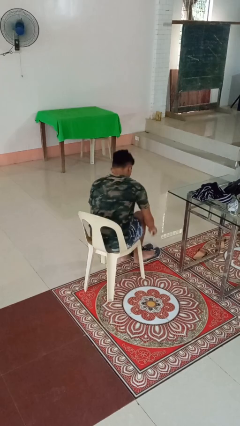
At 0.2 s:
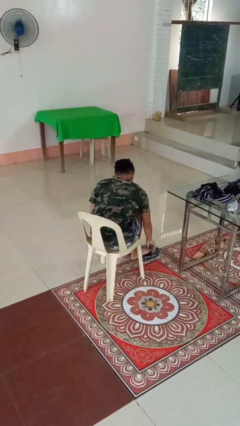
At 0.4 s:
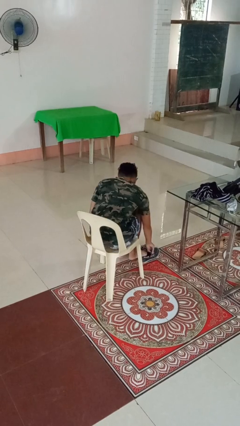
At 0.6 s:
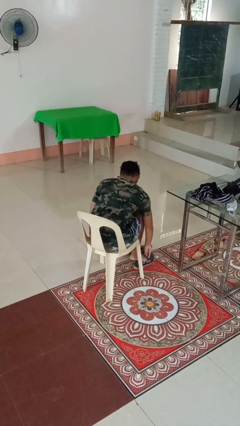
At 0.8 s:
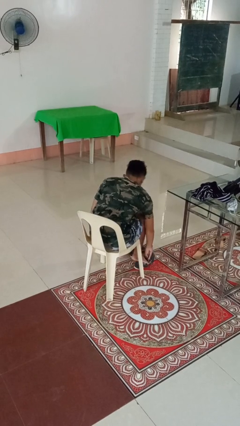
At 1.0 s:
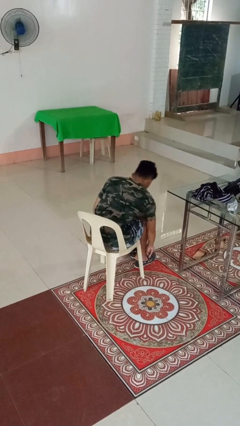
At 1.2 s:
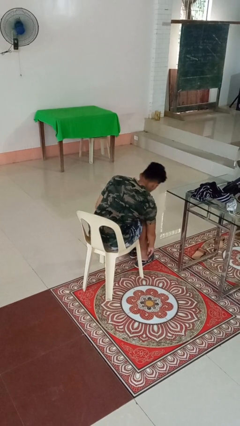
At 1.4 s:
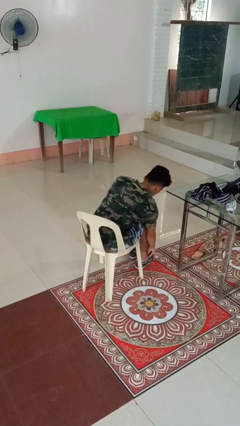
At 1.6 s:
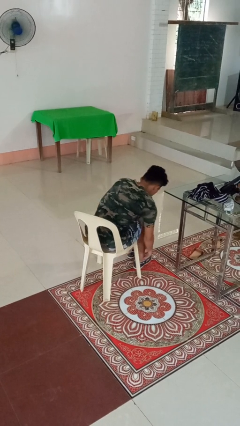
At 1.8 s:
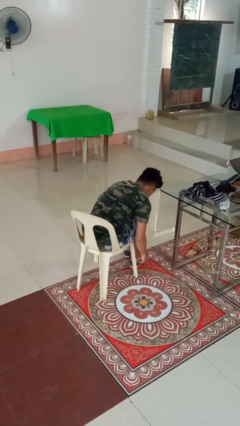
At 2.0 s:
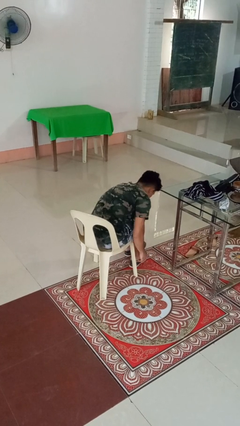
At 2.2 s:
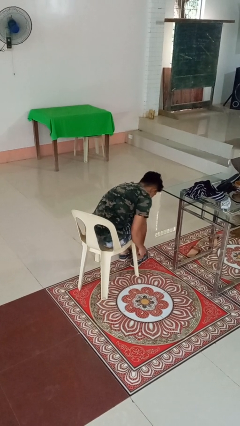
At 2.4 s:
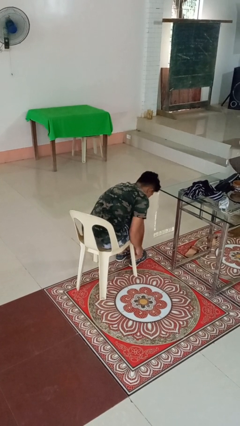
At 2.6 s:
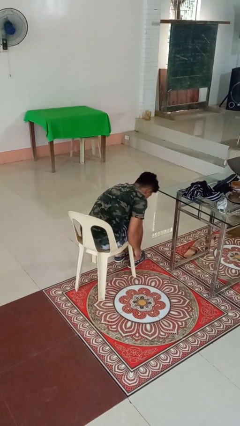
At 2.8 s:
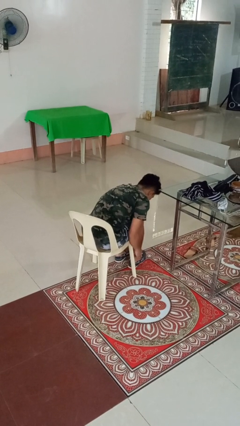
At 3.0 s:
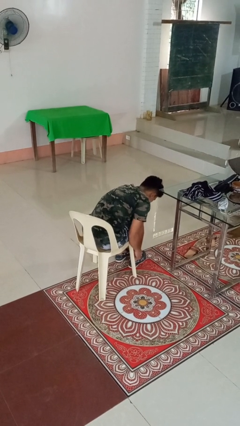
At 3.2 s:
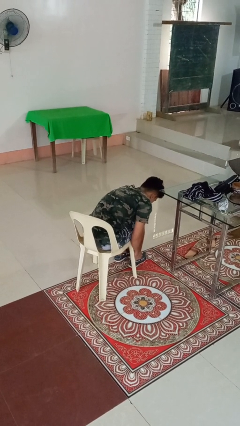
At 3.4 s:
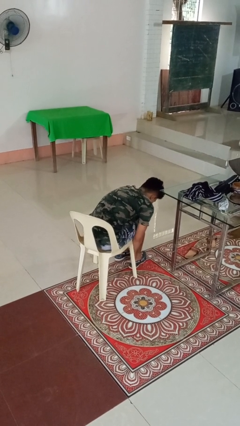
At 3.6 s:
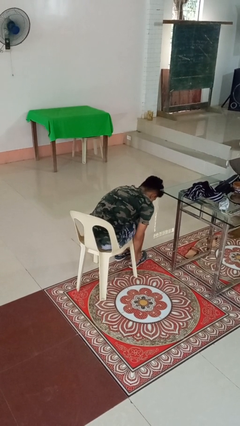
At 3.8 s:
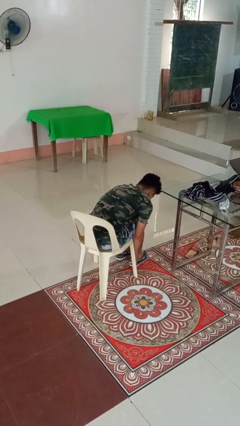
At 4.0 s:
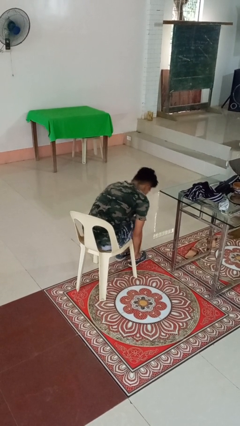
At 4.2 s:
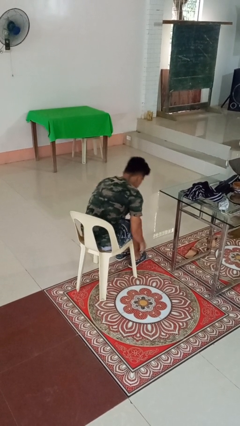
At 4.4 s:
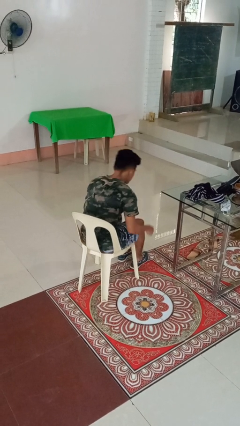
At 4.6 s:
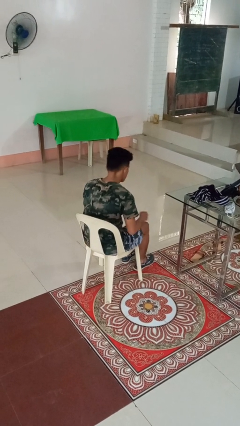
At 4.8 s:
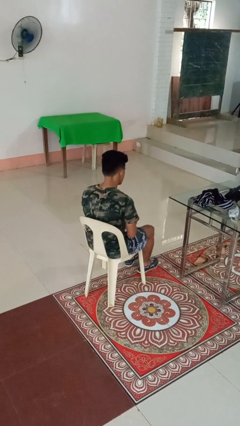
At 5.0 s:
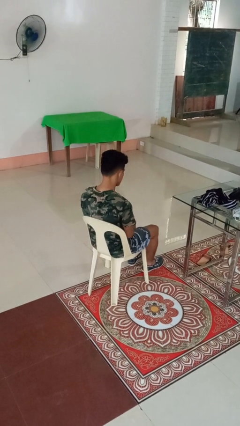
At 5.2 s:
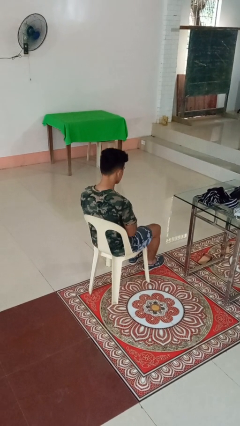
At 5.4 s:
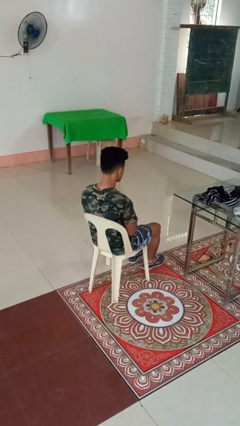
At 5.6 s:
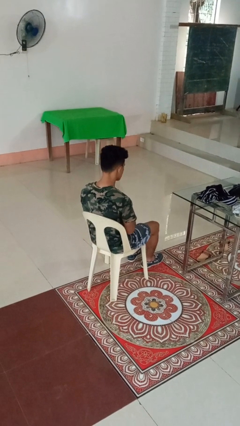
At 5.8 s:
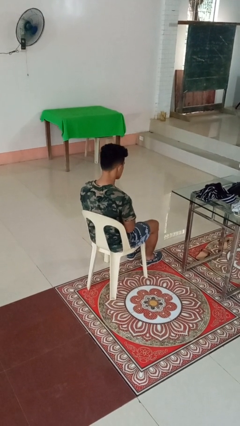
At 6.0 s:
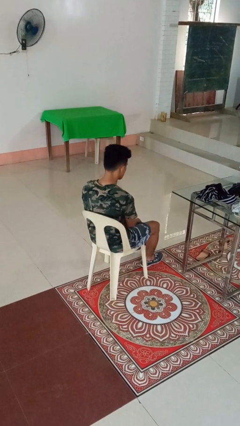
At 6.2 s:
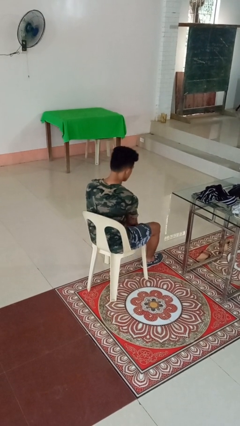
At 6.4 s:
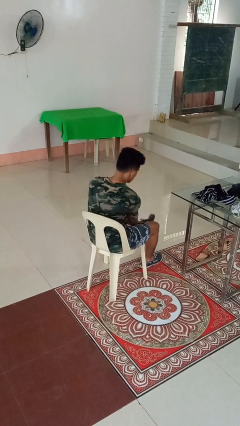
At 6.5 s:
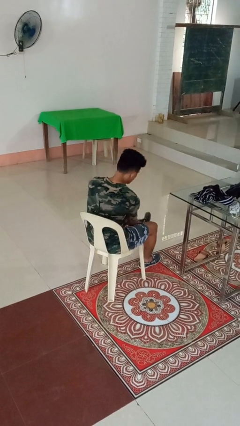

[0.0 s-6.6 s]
person puts on shoes

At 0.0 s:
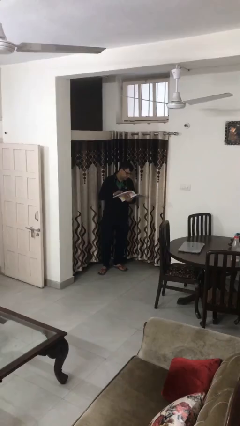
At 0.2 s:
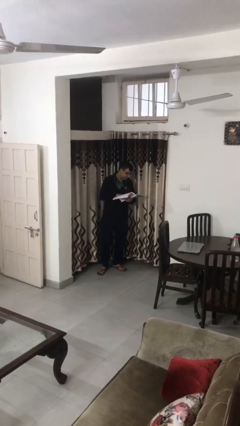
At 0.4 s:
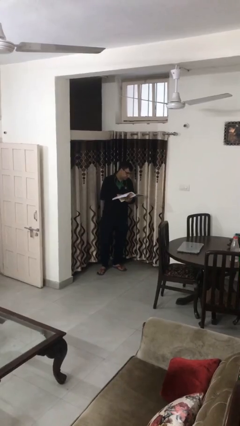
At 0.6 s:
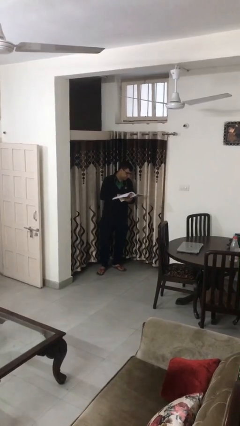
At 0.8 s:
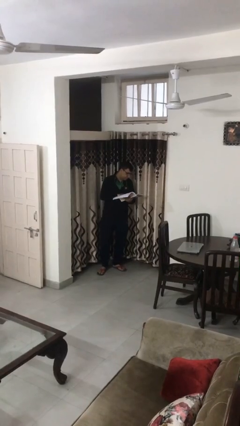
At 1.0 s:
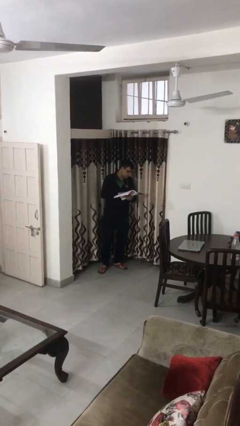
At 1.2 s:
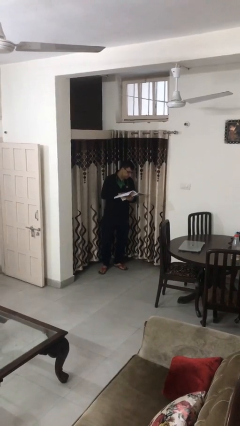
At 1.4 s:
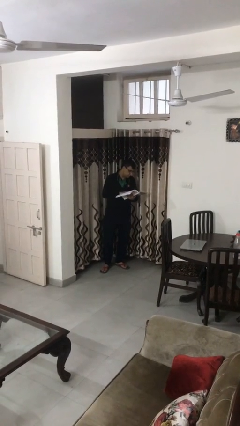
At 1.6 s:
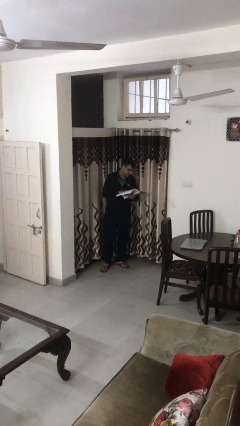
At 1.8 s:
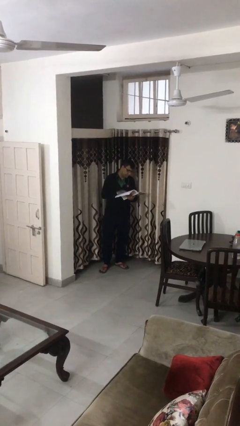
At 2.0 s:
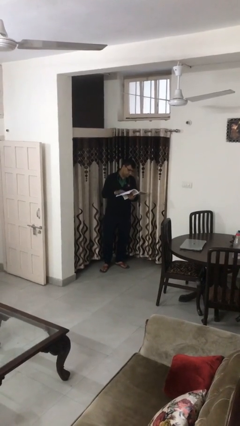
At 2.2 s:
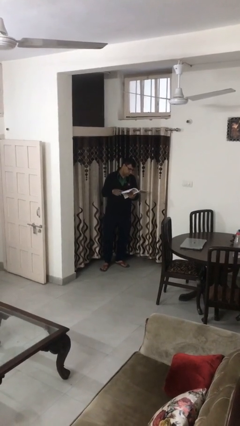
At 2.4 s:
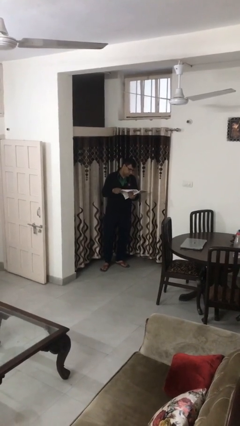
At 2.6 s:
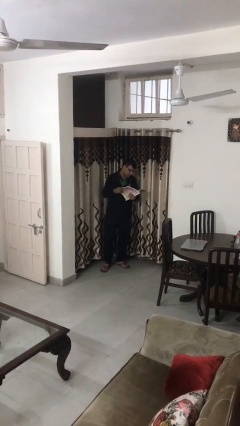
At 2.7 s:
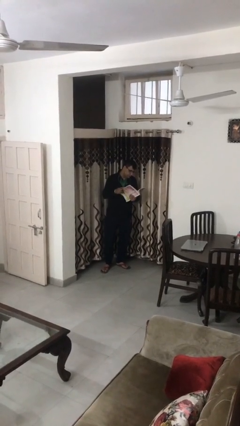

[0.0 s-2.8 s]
person reads document

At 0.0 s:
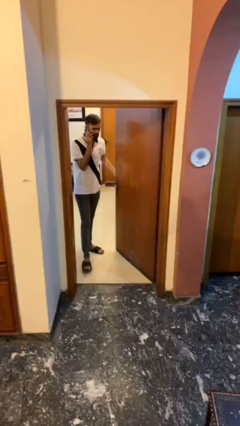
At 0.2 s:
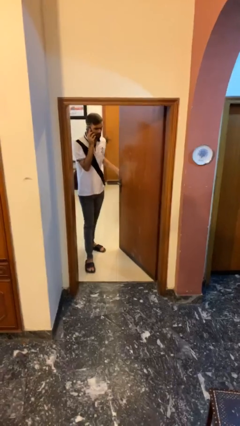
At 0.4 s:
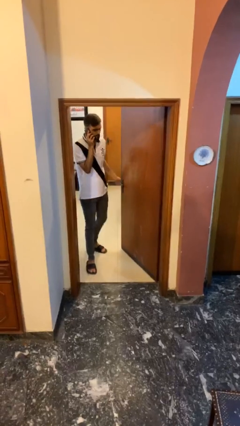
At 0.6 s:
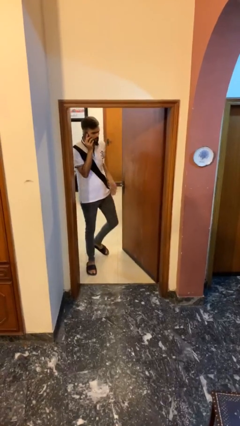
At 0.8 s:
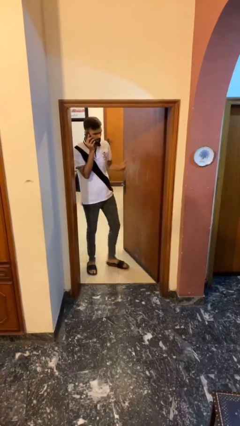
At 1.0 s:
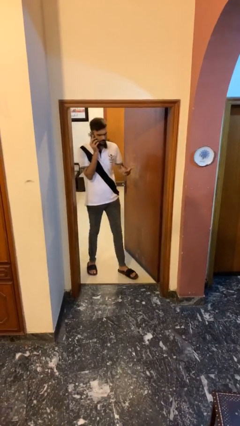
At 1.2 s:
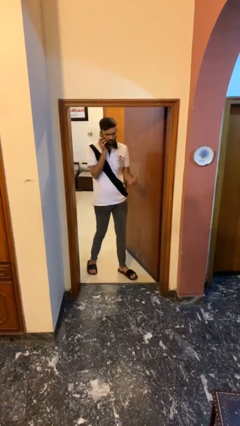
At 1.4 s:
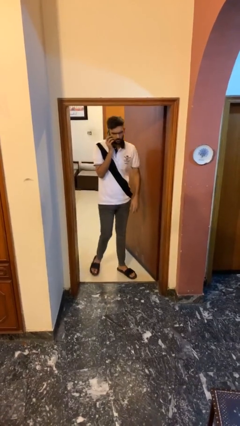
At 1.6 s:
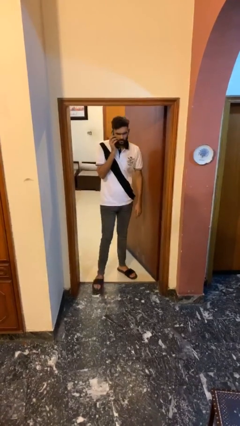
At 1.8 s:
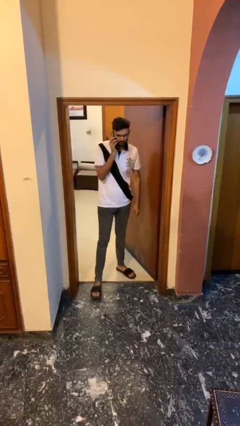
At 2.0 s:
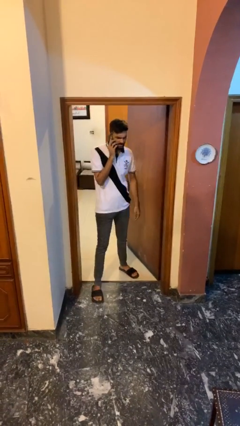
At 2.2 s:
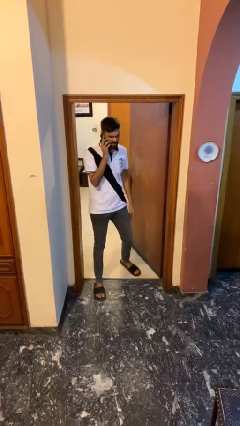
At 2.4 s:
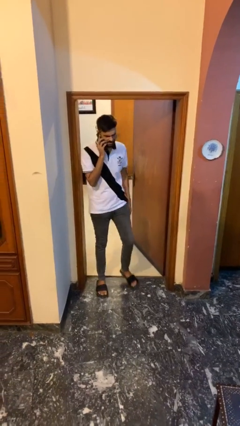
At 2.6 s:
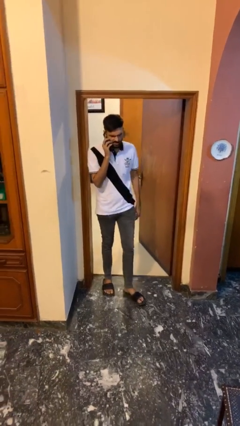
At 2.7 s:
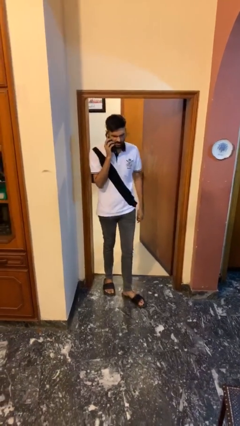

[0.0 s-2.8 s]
person enters scene through structure

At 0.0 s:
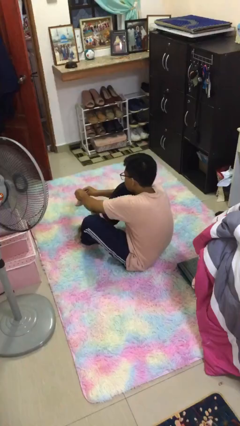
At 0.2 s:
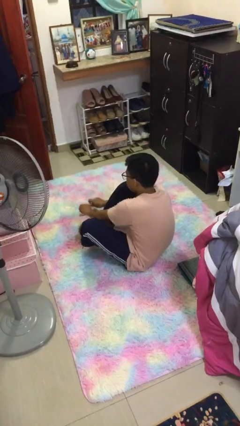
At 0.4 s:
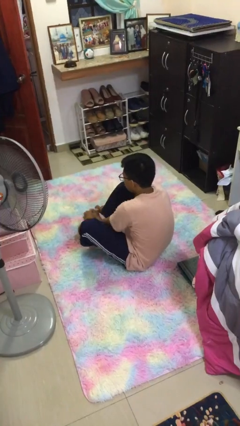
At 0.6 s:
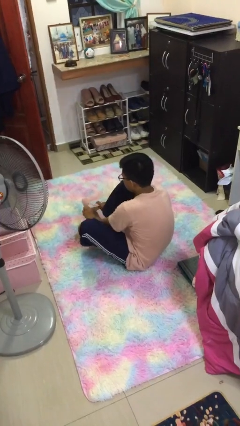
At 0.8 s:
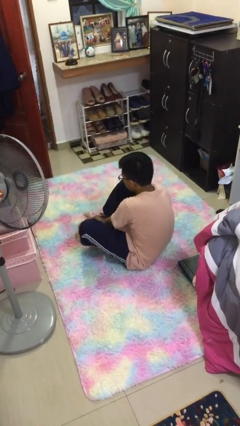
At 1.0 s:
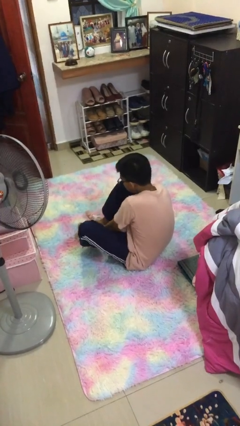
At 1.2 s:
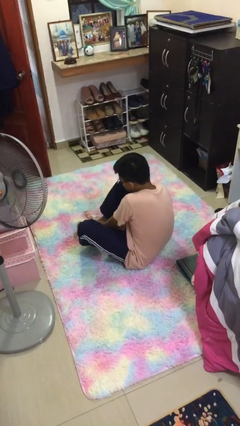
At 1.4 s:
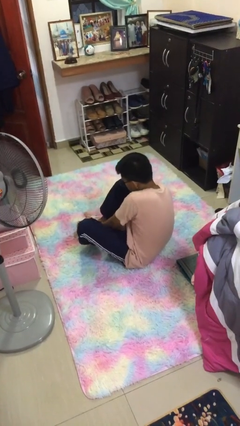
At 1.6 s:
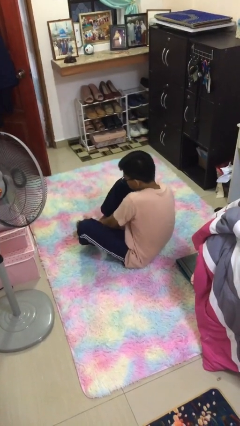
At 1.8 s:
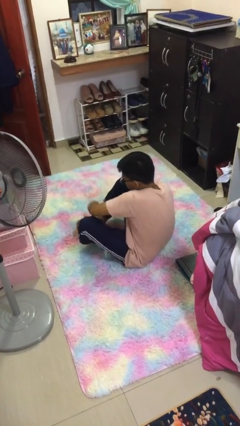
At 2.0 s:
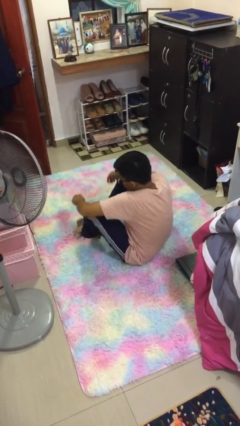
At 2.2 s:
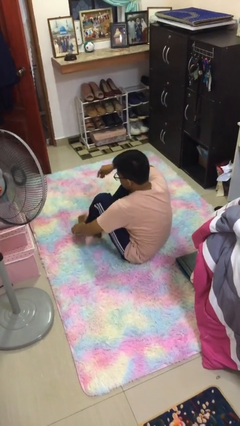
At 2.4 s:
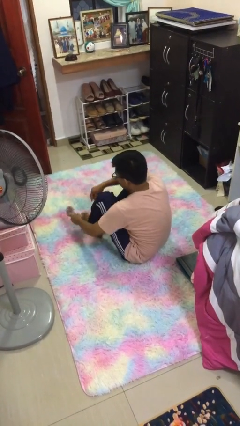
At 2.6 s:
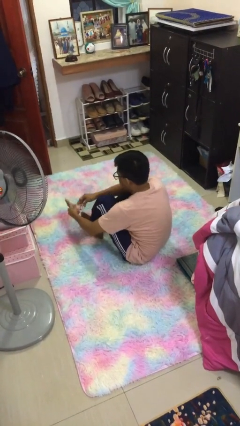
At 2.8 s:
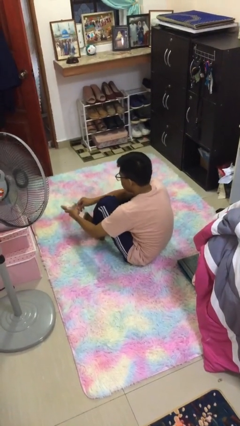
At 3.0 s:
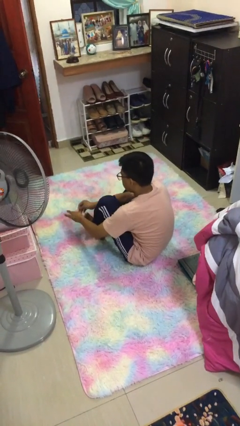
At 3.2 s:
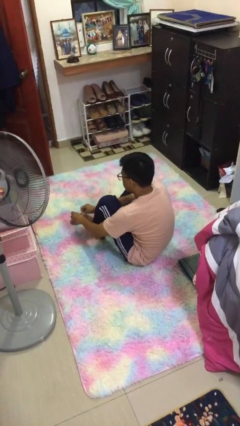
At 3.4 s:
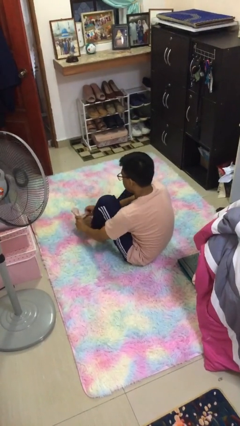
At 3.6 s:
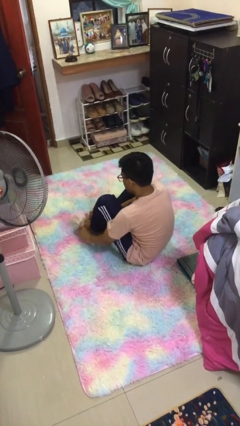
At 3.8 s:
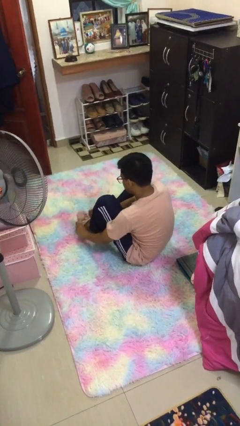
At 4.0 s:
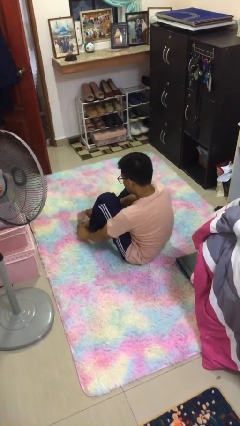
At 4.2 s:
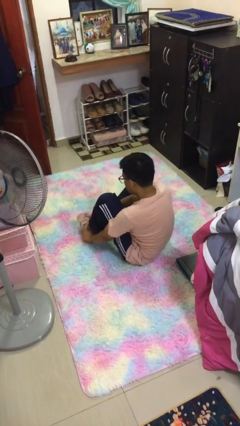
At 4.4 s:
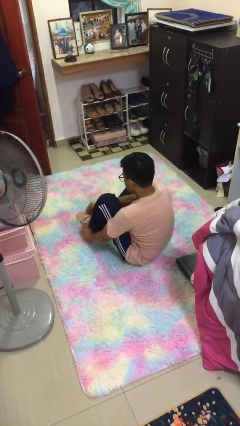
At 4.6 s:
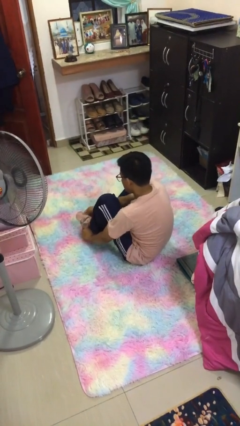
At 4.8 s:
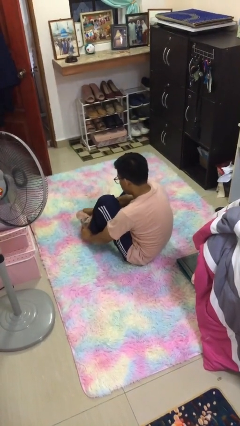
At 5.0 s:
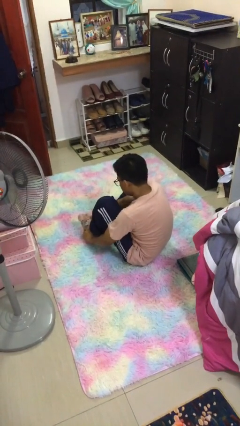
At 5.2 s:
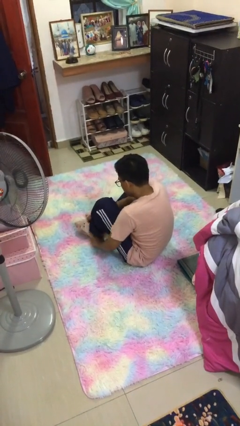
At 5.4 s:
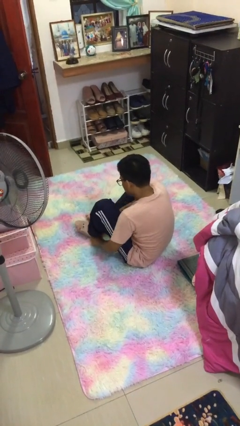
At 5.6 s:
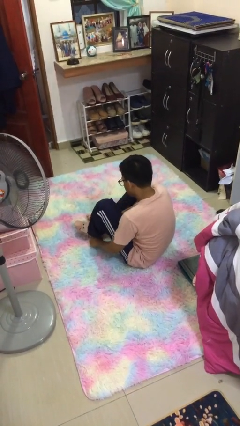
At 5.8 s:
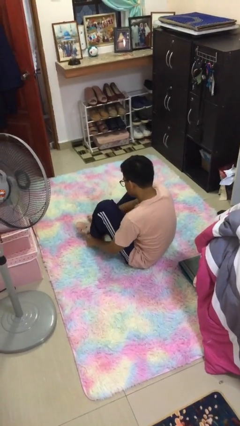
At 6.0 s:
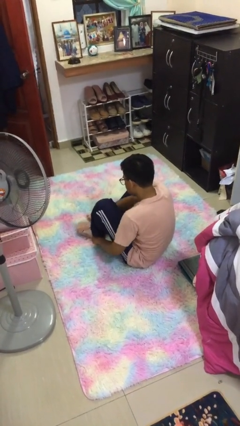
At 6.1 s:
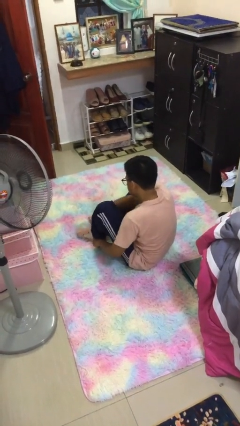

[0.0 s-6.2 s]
person puts on socks
